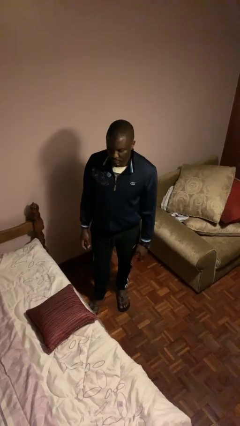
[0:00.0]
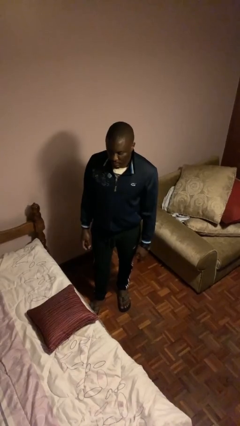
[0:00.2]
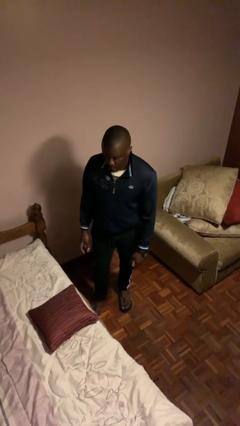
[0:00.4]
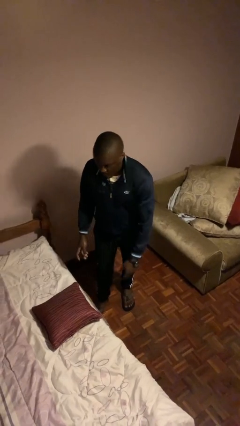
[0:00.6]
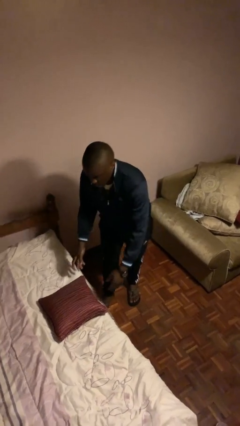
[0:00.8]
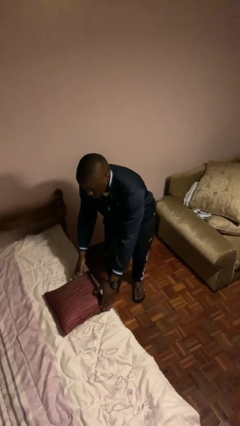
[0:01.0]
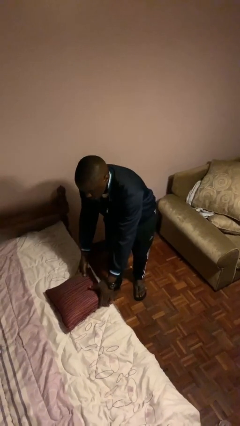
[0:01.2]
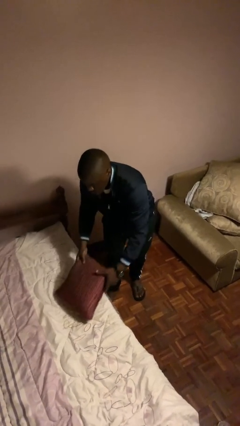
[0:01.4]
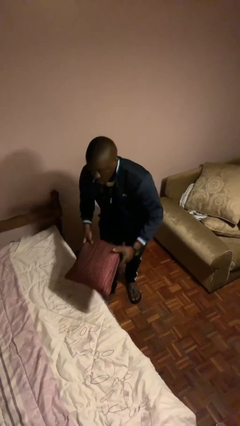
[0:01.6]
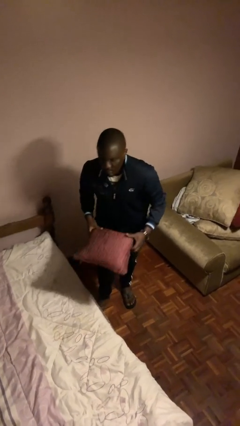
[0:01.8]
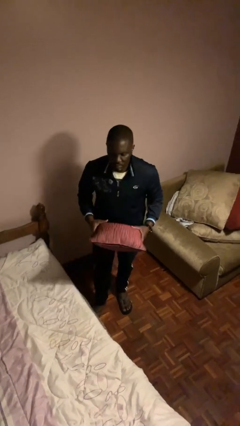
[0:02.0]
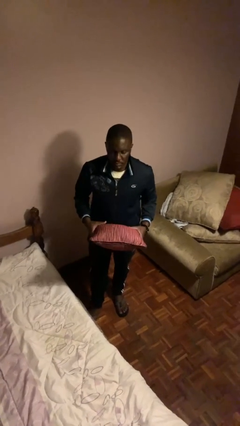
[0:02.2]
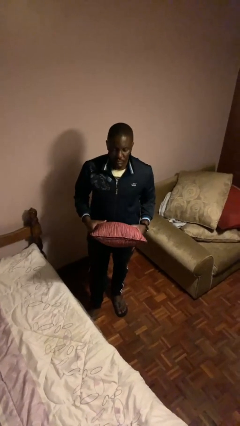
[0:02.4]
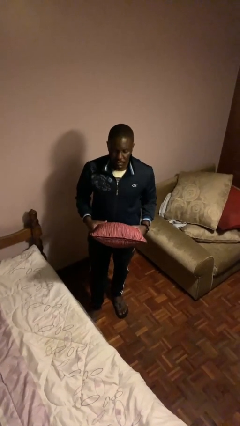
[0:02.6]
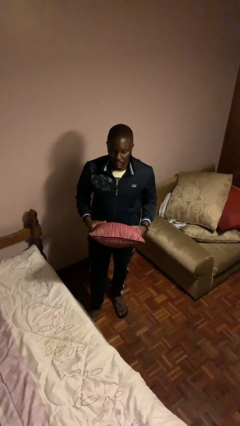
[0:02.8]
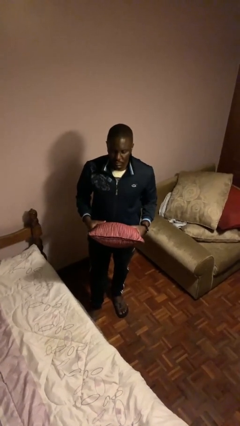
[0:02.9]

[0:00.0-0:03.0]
person picks up object from bed

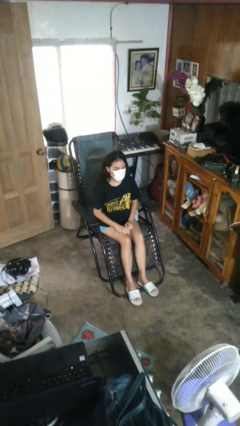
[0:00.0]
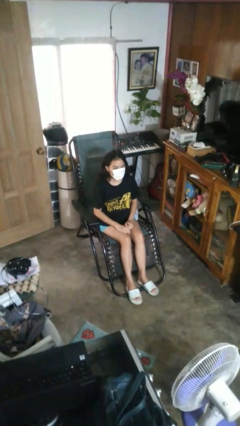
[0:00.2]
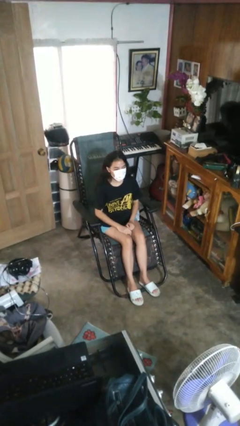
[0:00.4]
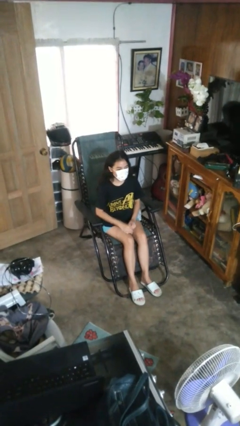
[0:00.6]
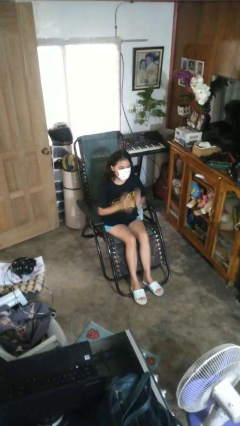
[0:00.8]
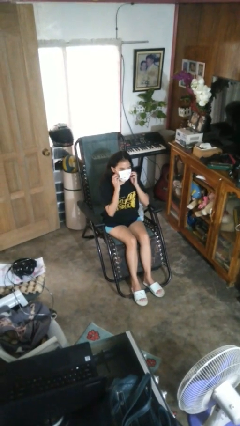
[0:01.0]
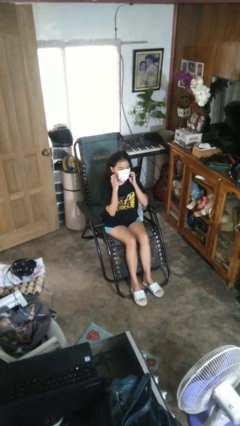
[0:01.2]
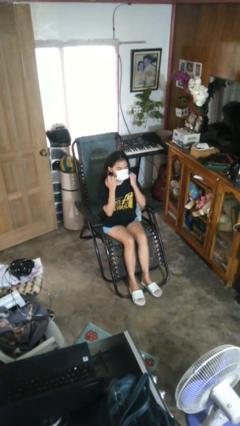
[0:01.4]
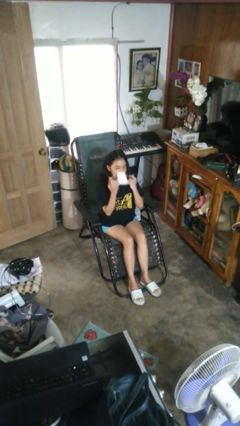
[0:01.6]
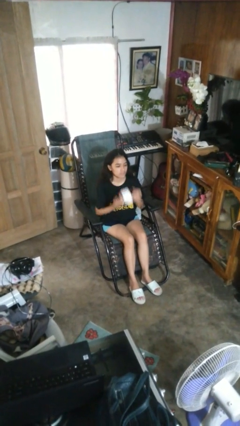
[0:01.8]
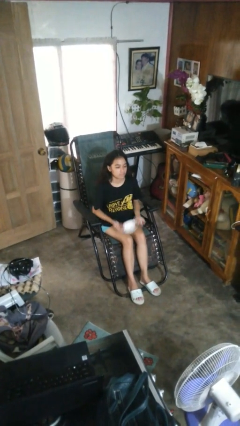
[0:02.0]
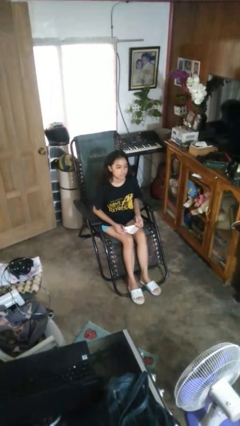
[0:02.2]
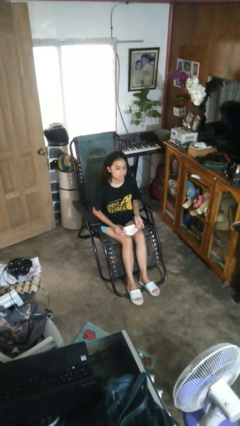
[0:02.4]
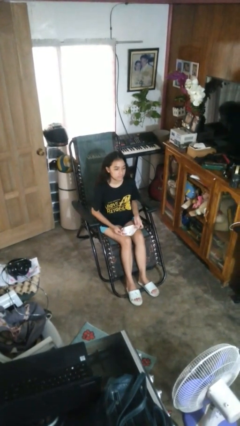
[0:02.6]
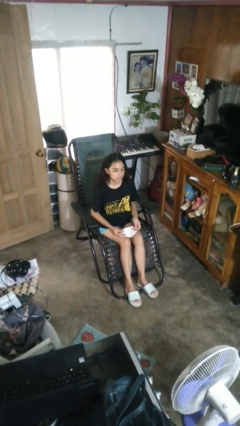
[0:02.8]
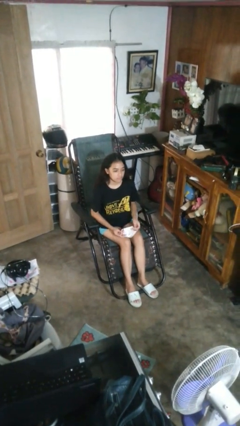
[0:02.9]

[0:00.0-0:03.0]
person takes off facemask

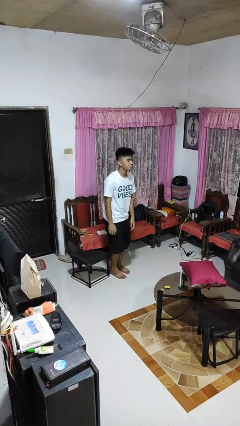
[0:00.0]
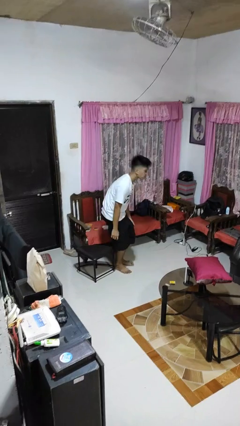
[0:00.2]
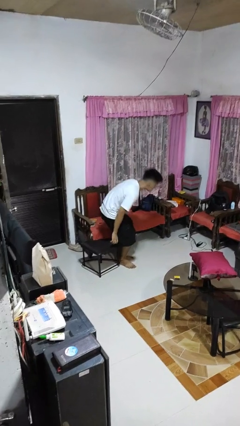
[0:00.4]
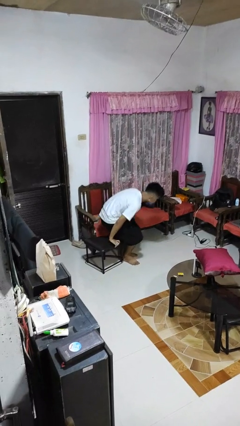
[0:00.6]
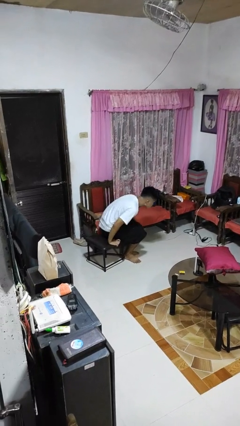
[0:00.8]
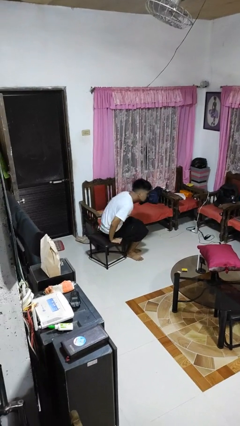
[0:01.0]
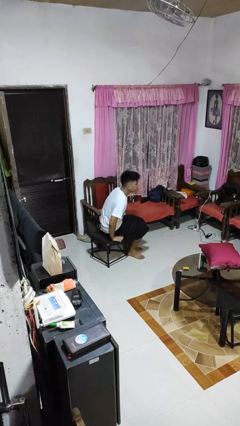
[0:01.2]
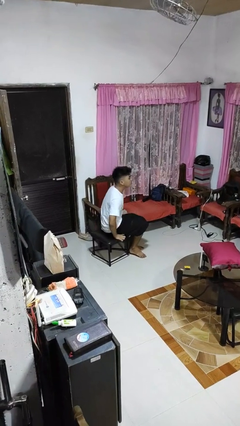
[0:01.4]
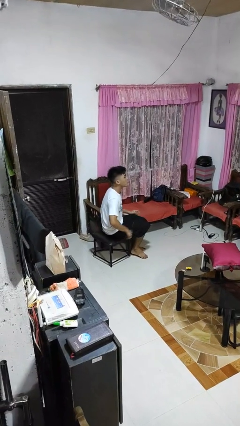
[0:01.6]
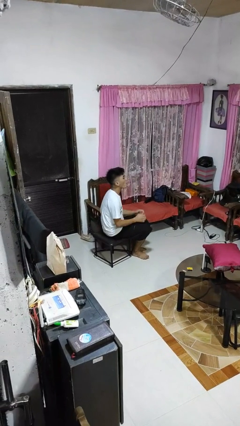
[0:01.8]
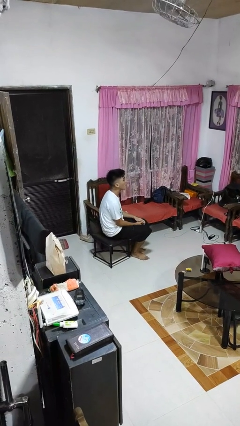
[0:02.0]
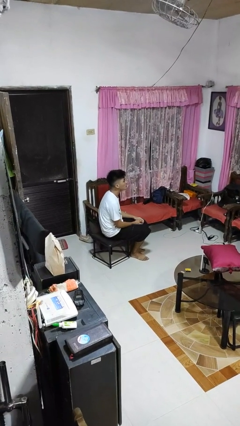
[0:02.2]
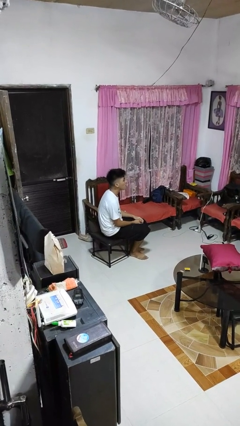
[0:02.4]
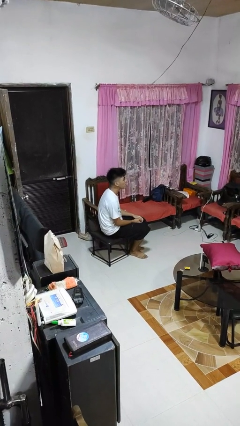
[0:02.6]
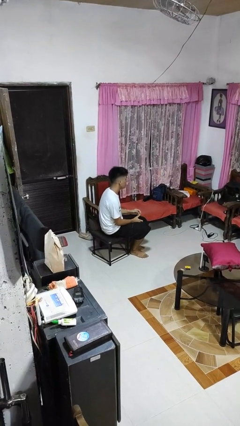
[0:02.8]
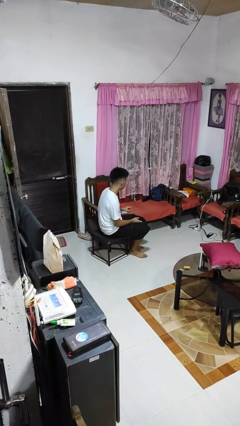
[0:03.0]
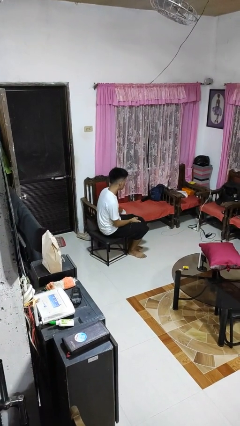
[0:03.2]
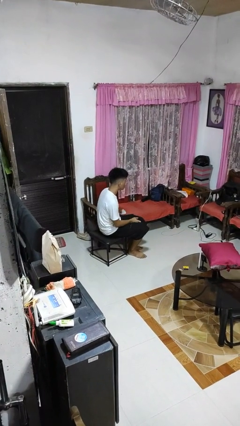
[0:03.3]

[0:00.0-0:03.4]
person sits down

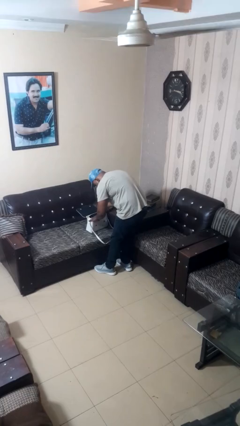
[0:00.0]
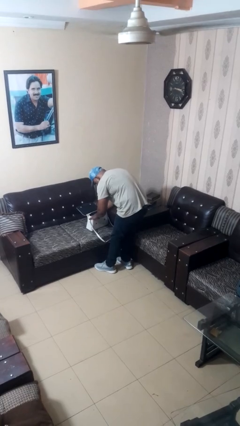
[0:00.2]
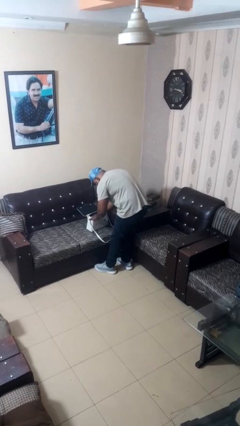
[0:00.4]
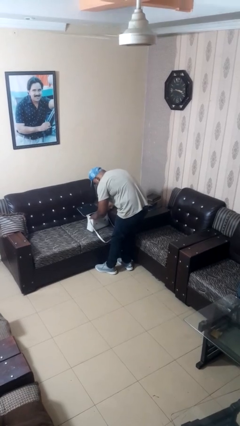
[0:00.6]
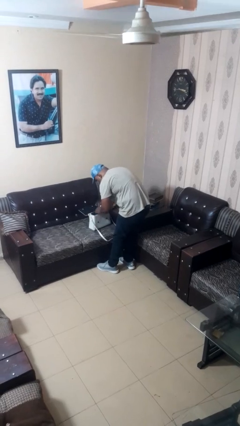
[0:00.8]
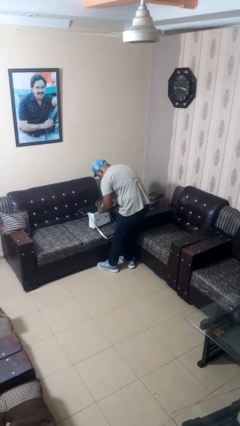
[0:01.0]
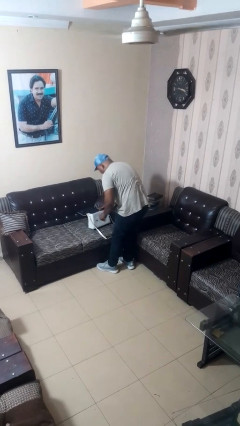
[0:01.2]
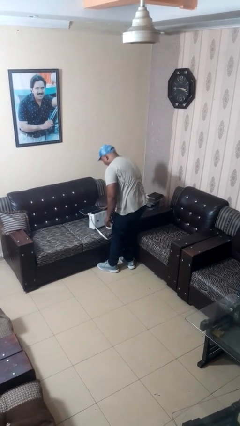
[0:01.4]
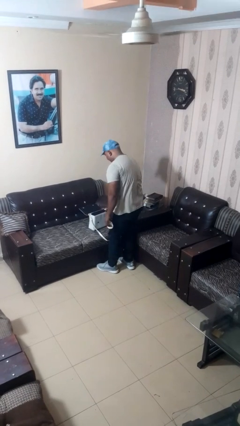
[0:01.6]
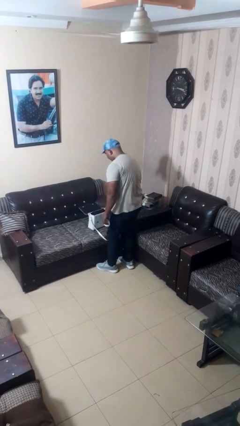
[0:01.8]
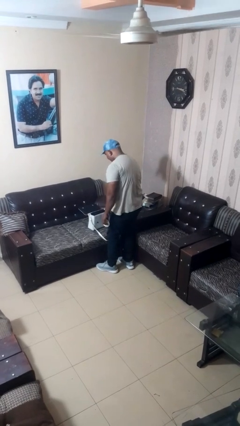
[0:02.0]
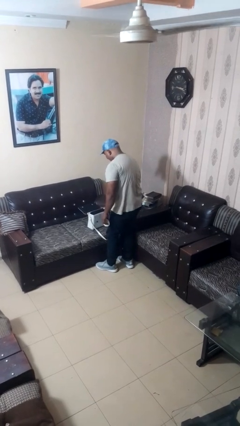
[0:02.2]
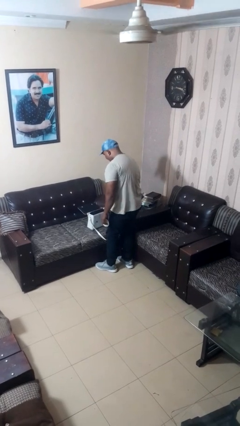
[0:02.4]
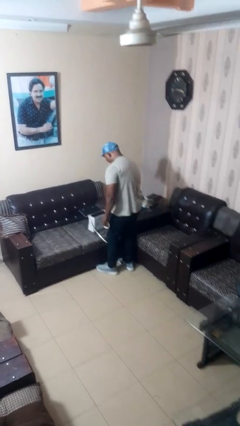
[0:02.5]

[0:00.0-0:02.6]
person takes object from purse

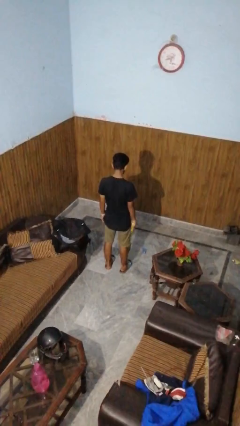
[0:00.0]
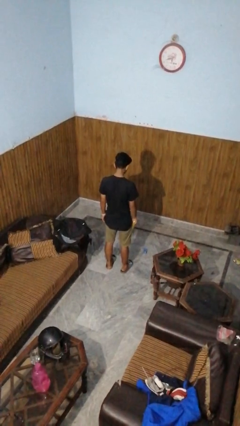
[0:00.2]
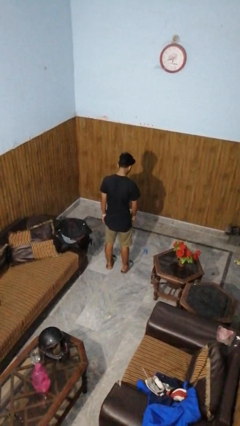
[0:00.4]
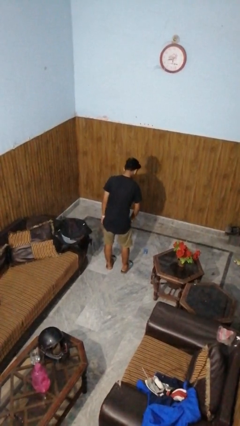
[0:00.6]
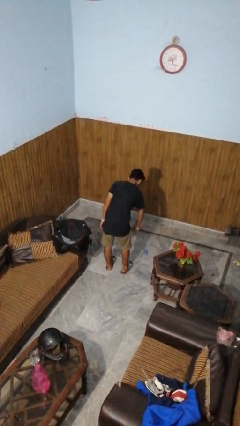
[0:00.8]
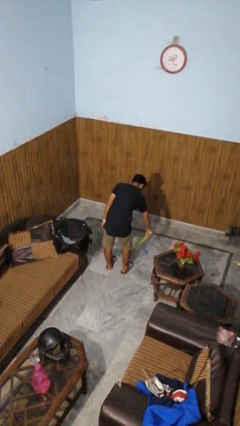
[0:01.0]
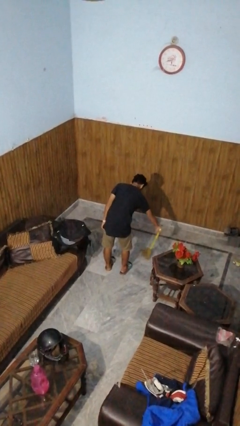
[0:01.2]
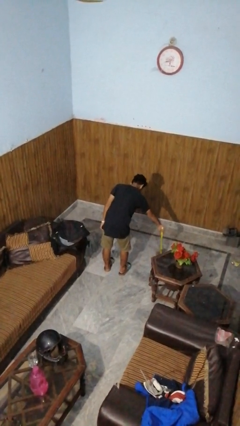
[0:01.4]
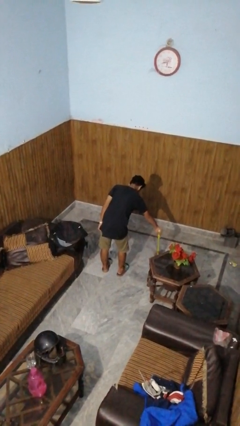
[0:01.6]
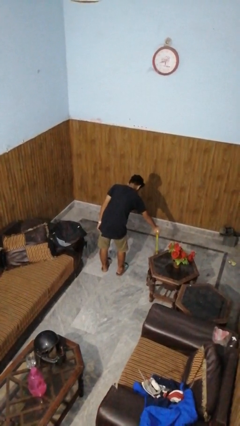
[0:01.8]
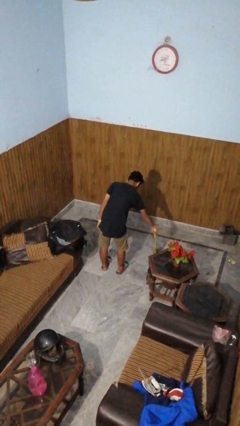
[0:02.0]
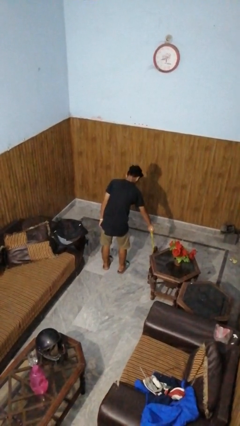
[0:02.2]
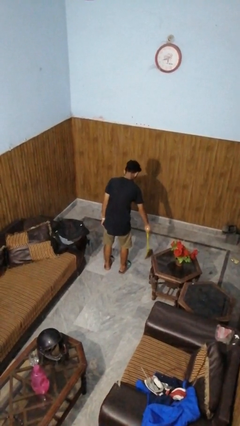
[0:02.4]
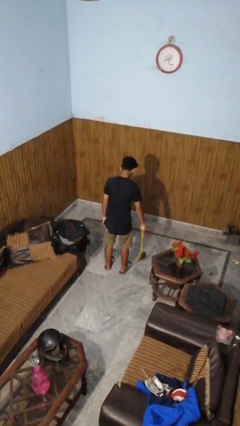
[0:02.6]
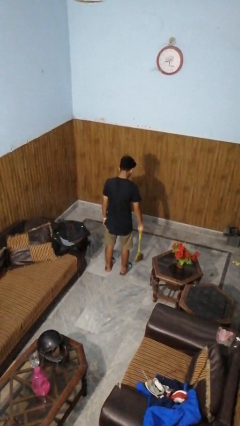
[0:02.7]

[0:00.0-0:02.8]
person sweeps floor

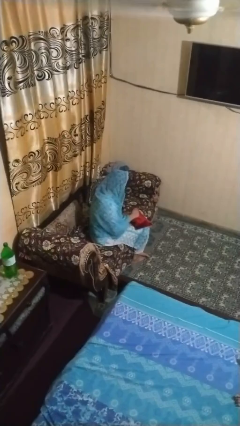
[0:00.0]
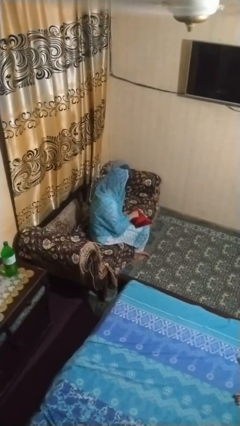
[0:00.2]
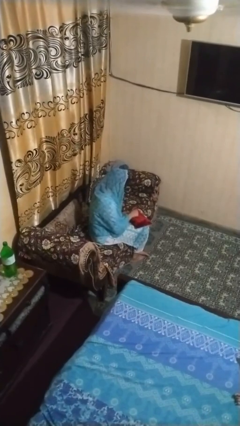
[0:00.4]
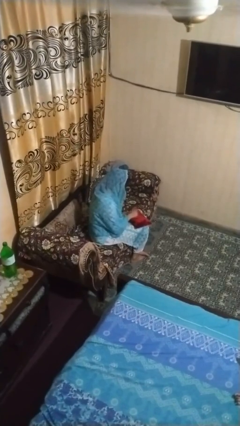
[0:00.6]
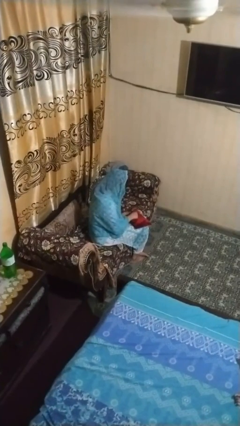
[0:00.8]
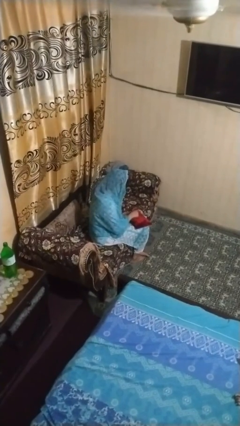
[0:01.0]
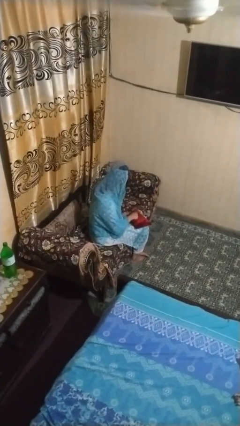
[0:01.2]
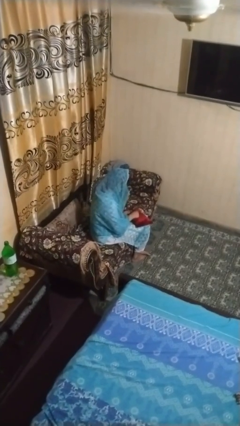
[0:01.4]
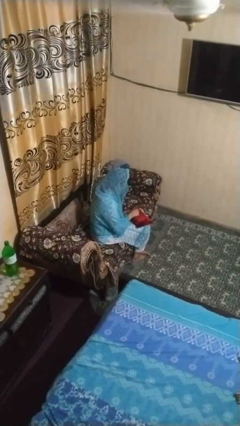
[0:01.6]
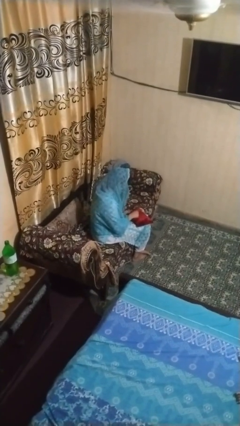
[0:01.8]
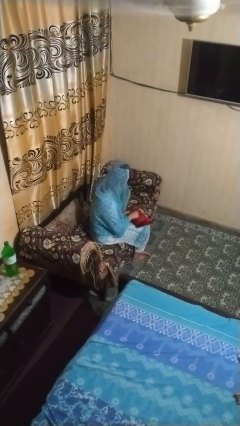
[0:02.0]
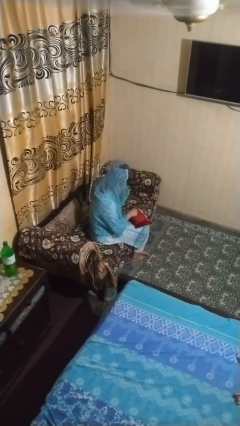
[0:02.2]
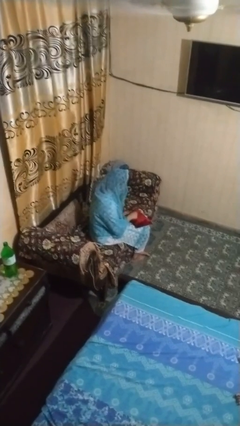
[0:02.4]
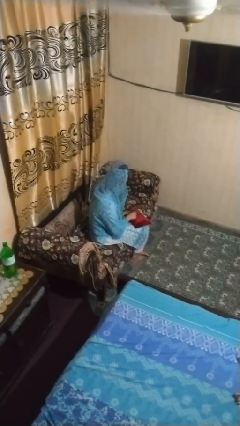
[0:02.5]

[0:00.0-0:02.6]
person taps object with finger

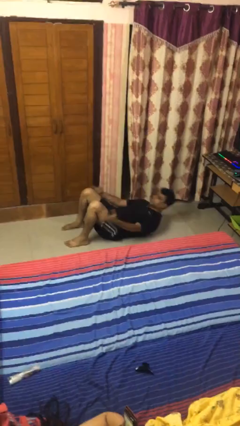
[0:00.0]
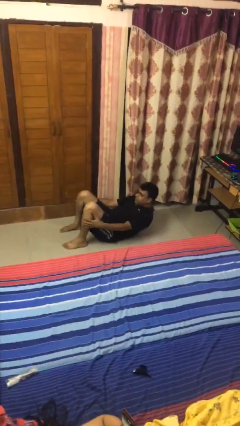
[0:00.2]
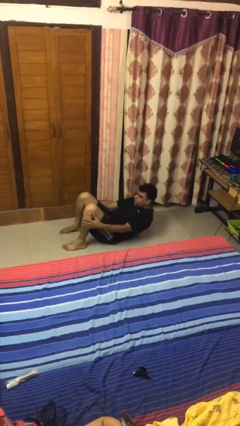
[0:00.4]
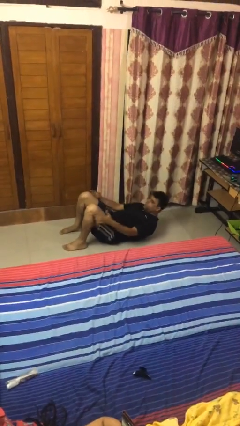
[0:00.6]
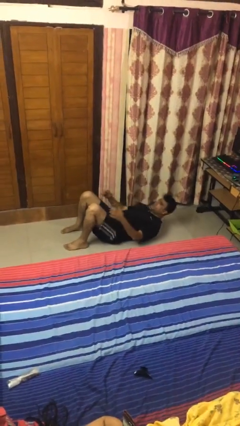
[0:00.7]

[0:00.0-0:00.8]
person exercises with situp
